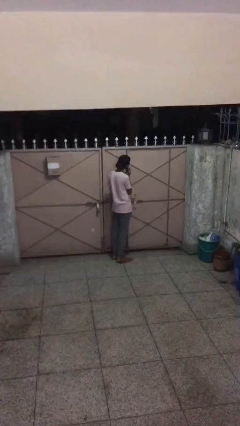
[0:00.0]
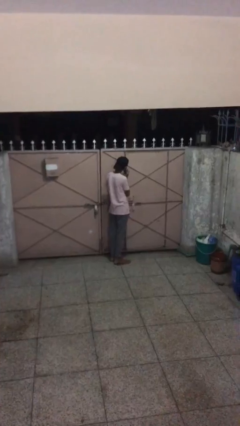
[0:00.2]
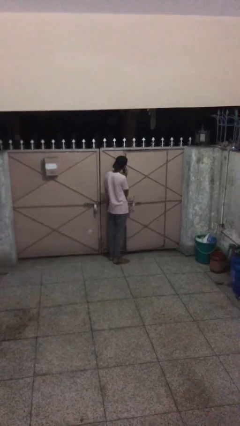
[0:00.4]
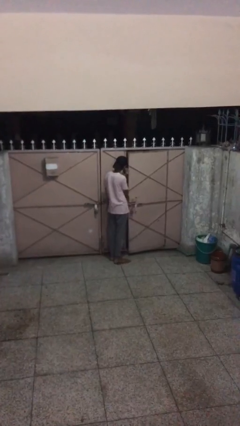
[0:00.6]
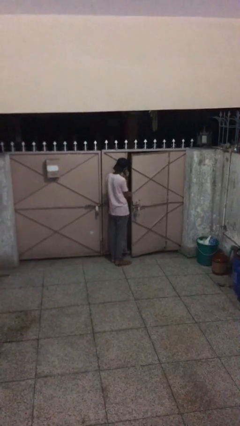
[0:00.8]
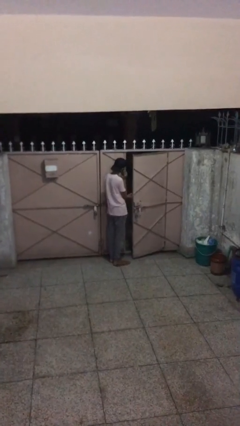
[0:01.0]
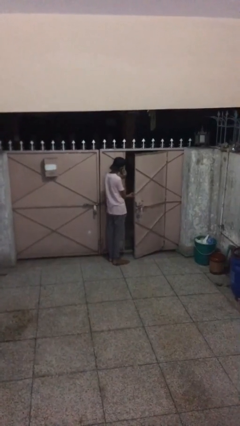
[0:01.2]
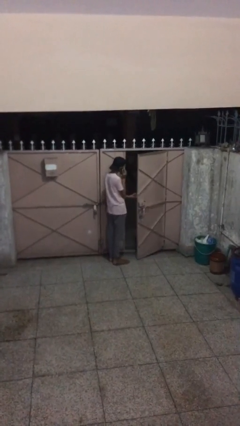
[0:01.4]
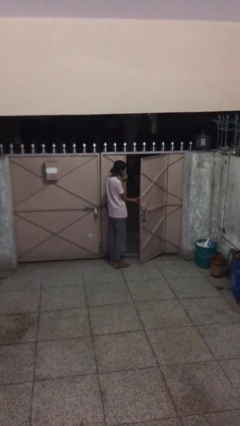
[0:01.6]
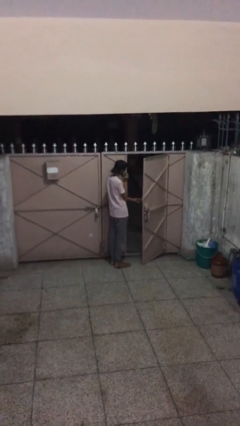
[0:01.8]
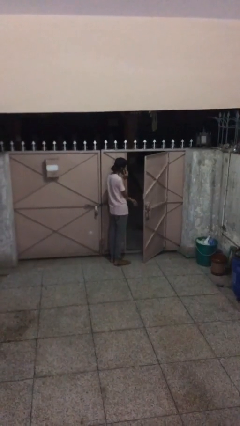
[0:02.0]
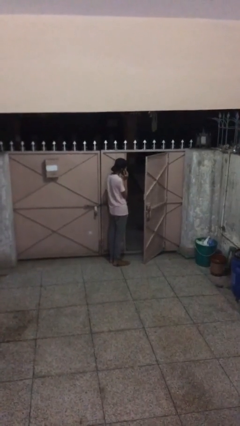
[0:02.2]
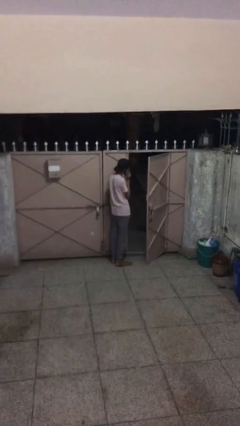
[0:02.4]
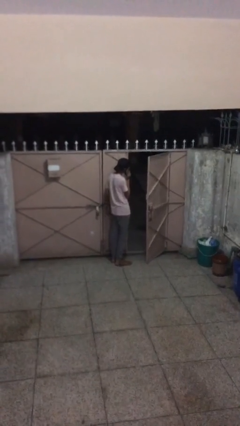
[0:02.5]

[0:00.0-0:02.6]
person opens facility door

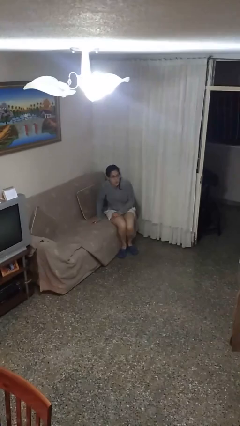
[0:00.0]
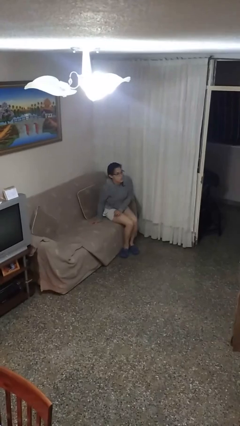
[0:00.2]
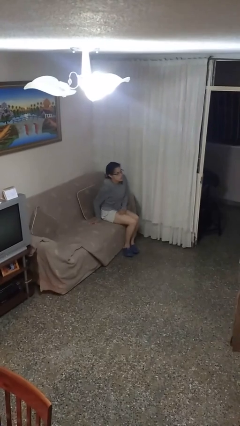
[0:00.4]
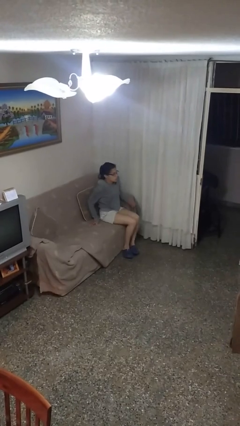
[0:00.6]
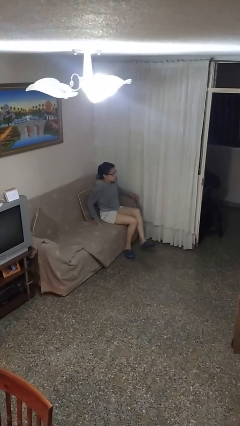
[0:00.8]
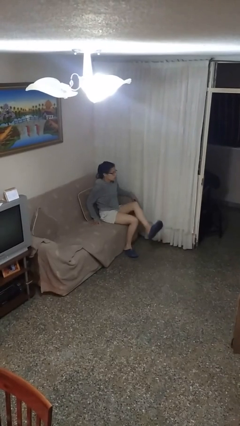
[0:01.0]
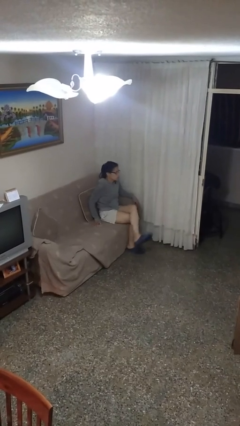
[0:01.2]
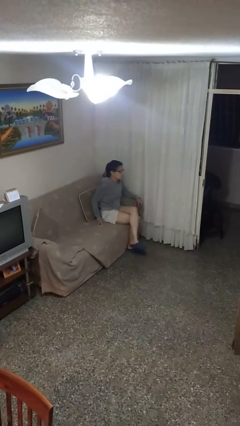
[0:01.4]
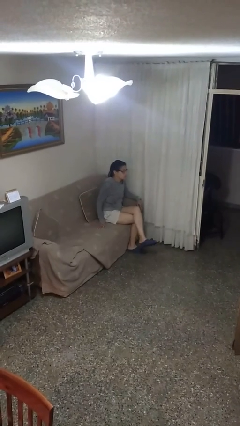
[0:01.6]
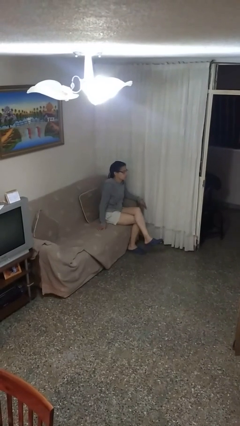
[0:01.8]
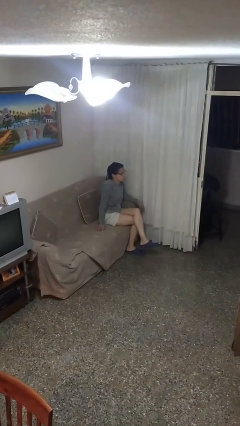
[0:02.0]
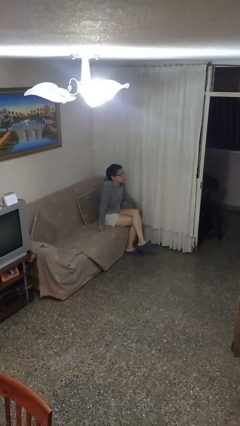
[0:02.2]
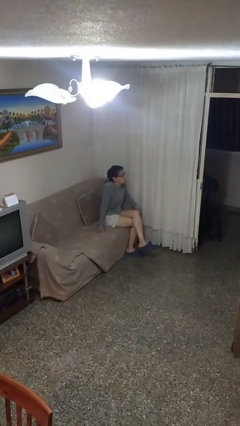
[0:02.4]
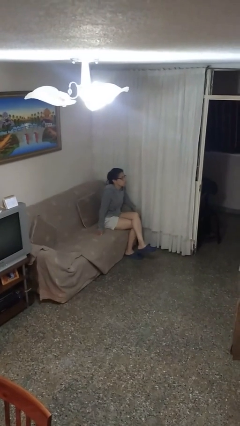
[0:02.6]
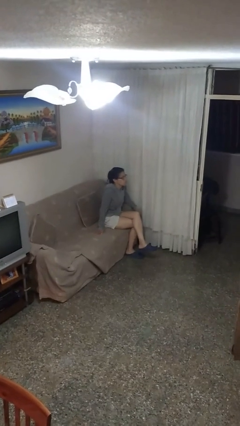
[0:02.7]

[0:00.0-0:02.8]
person crosses legs

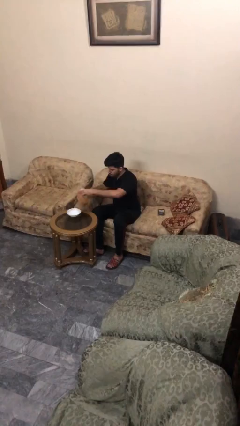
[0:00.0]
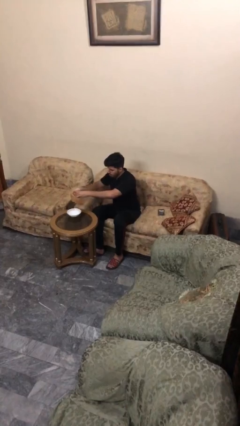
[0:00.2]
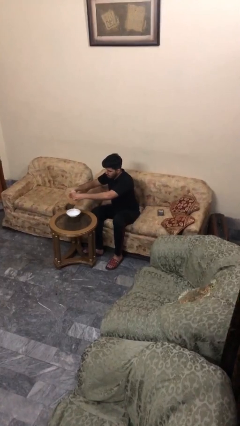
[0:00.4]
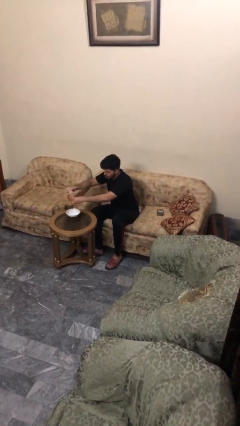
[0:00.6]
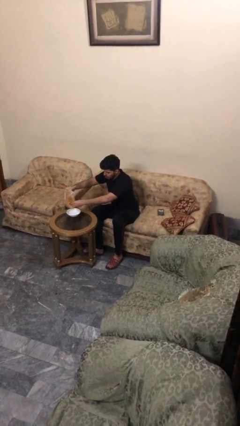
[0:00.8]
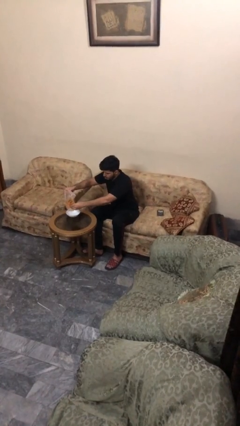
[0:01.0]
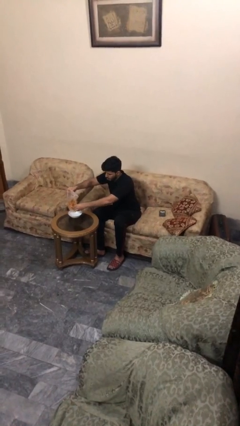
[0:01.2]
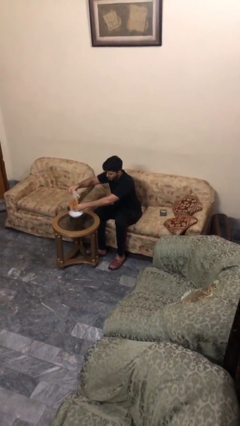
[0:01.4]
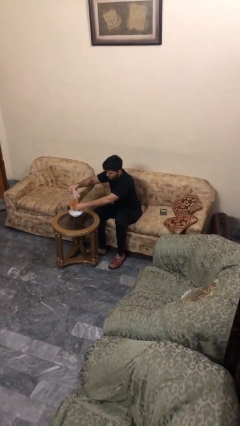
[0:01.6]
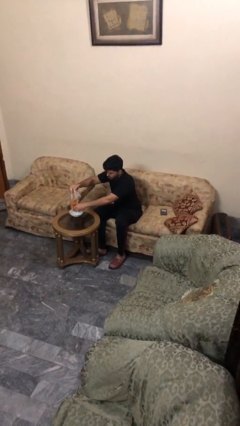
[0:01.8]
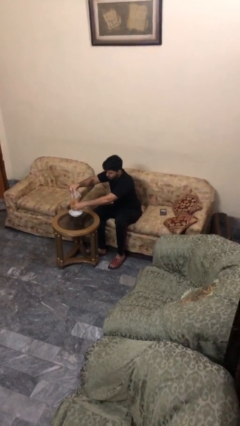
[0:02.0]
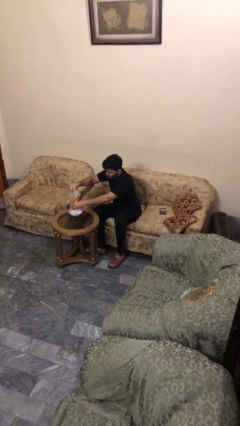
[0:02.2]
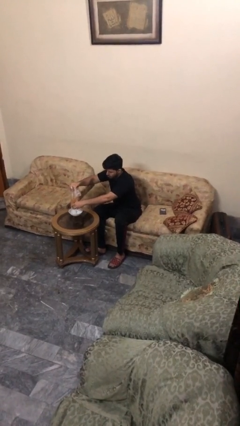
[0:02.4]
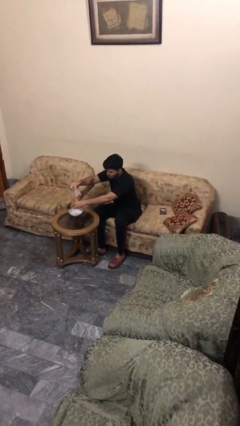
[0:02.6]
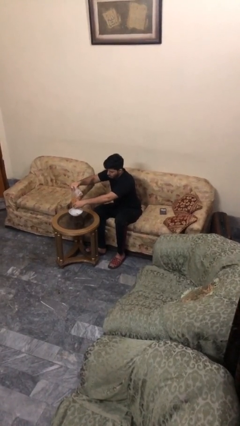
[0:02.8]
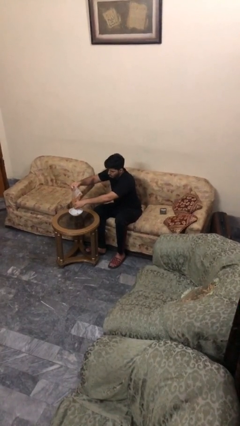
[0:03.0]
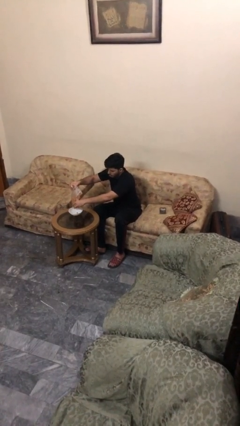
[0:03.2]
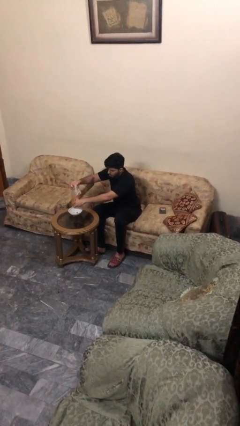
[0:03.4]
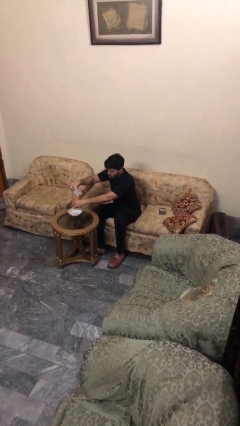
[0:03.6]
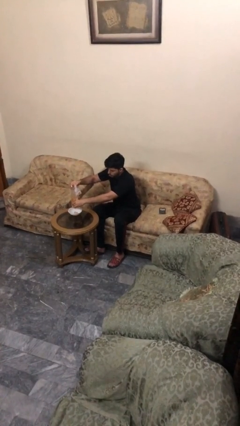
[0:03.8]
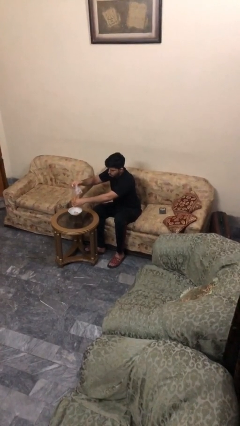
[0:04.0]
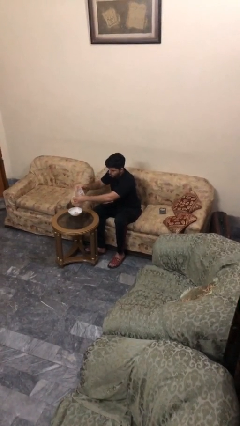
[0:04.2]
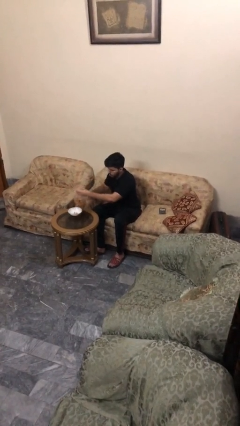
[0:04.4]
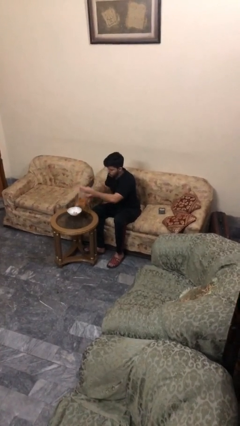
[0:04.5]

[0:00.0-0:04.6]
person pours into bowl

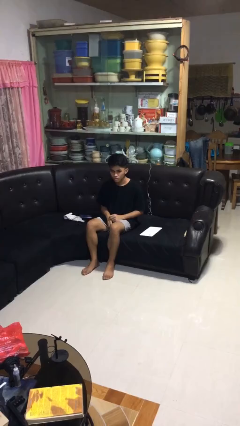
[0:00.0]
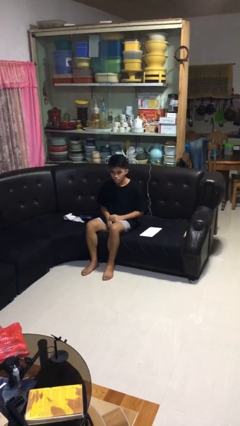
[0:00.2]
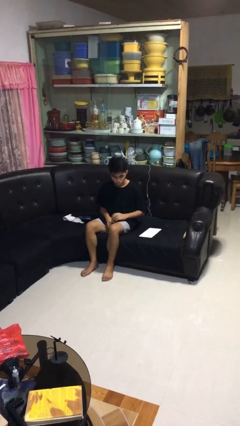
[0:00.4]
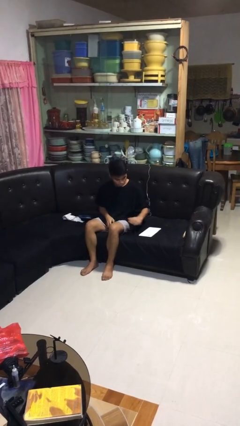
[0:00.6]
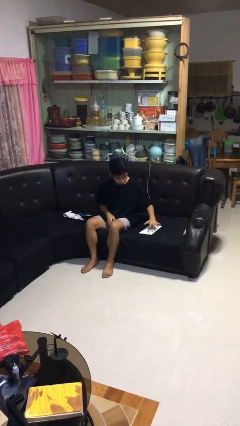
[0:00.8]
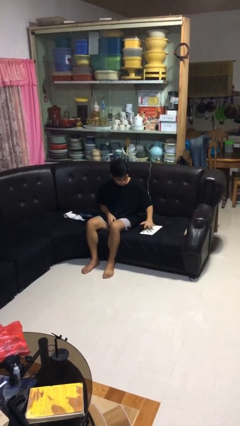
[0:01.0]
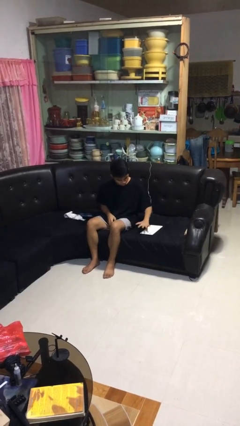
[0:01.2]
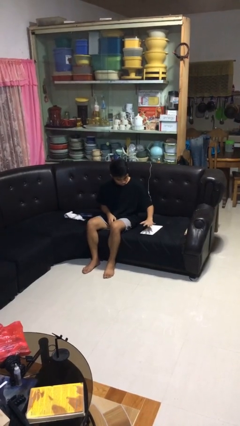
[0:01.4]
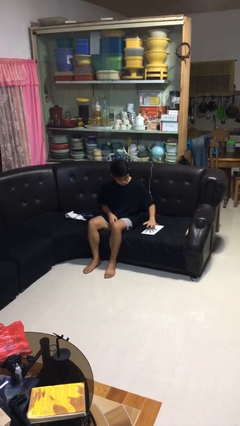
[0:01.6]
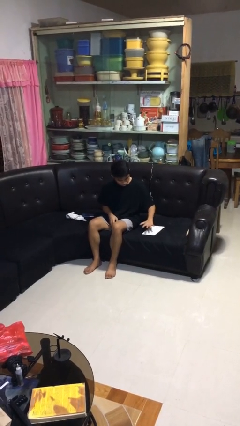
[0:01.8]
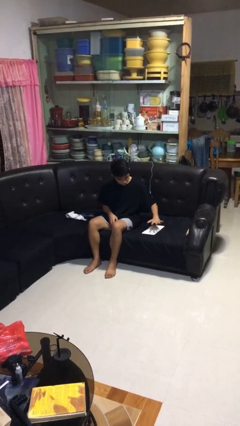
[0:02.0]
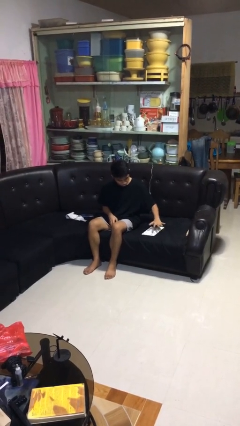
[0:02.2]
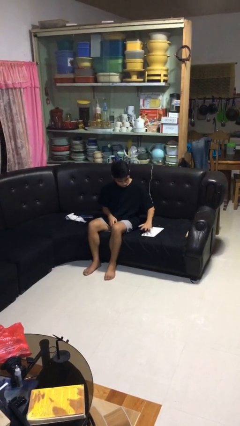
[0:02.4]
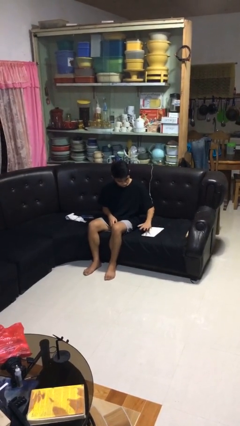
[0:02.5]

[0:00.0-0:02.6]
person waves hand over object

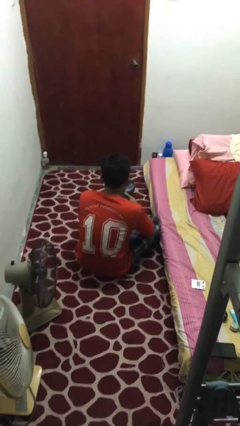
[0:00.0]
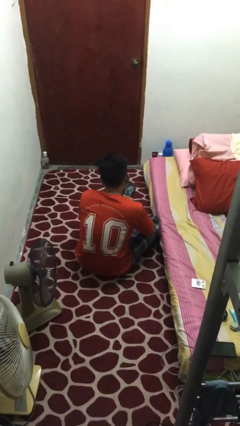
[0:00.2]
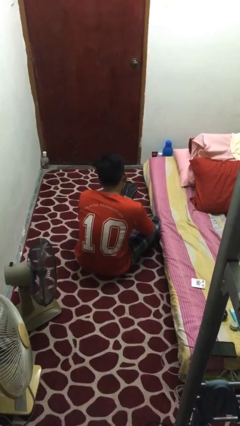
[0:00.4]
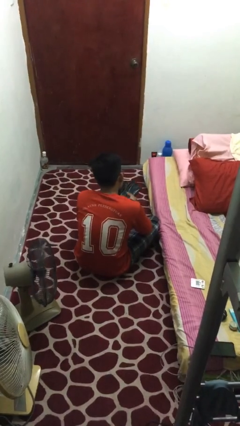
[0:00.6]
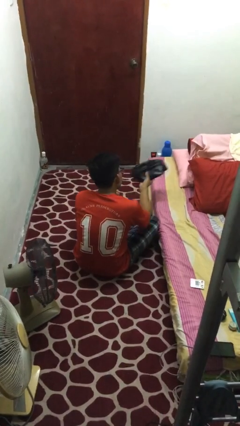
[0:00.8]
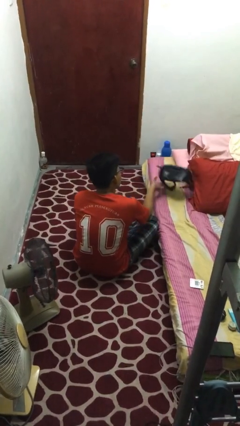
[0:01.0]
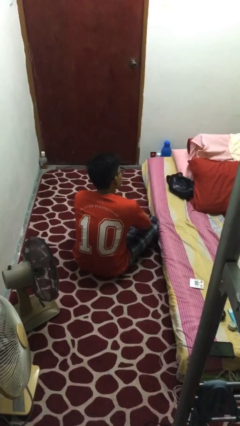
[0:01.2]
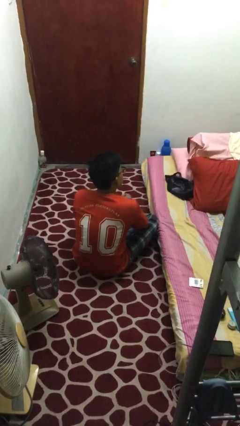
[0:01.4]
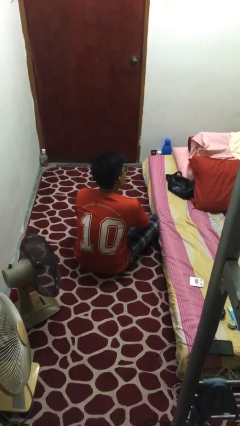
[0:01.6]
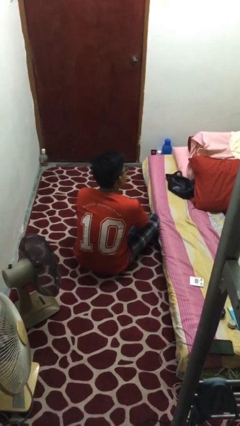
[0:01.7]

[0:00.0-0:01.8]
person puts down object on bed

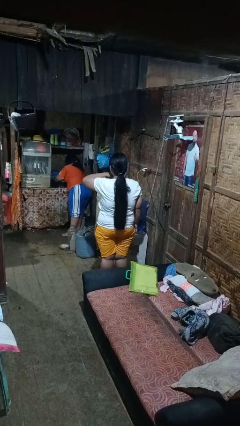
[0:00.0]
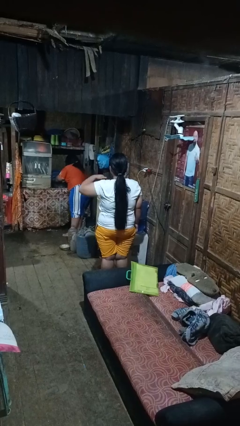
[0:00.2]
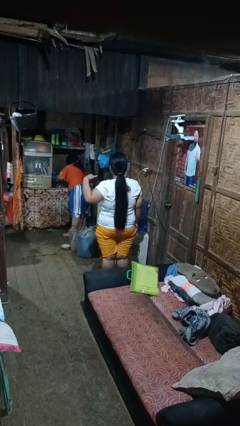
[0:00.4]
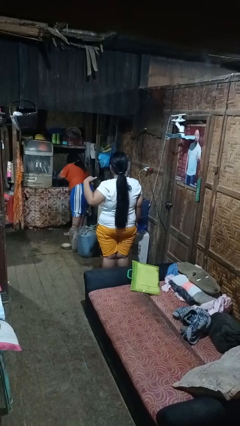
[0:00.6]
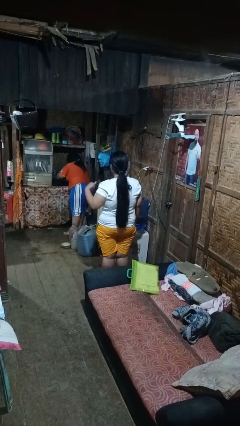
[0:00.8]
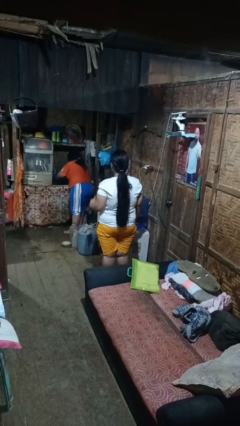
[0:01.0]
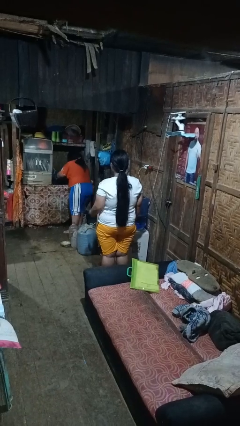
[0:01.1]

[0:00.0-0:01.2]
person gestures cut

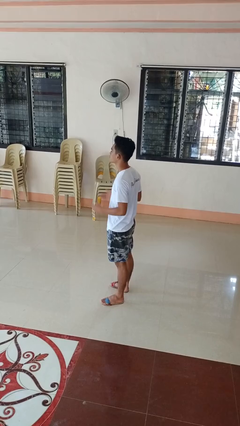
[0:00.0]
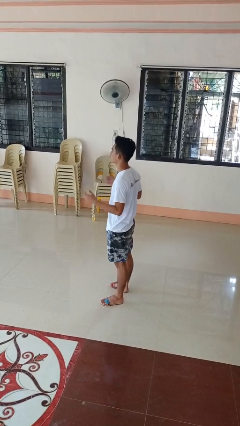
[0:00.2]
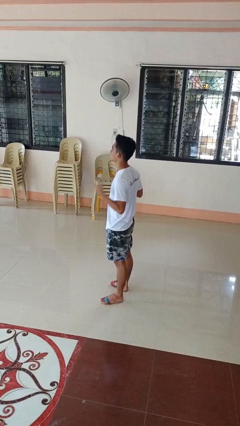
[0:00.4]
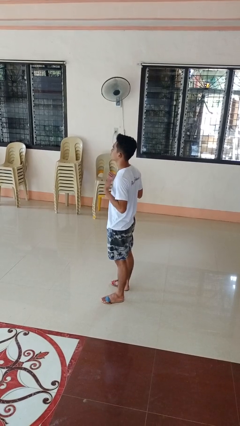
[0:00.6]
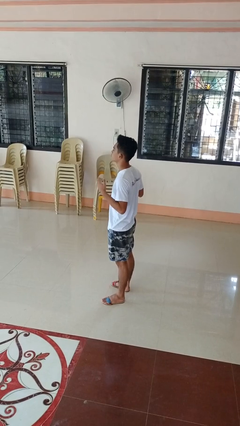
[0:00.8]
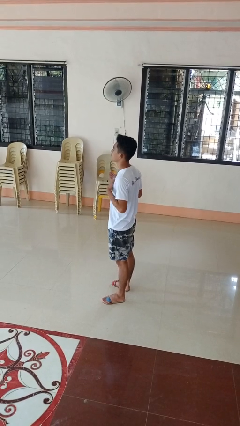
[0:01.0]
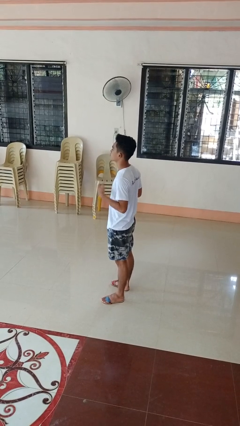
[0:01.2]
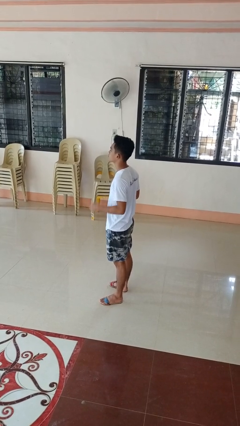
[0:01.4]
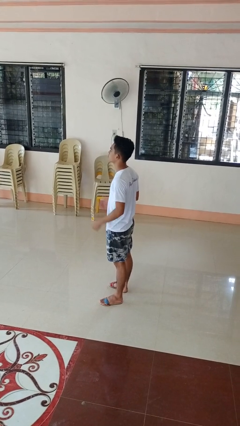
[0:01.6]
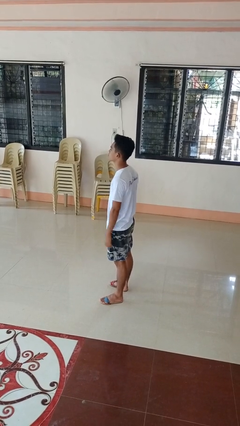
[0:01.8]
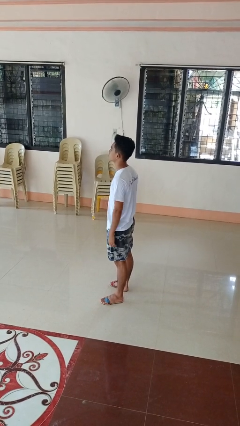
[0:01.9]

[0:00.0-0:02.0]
person drums on chest
